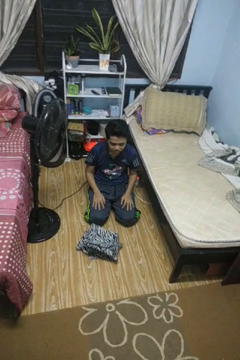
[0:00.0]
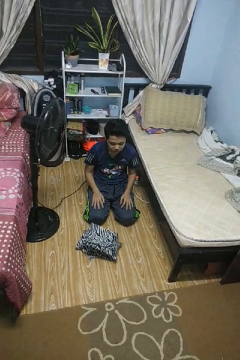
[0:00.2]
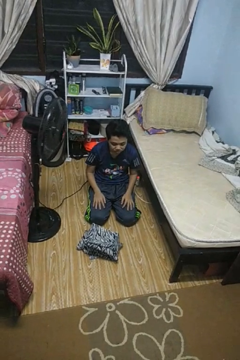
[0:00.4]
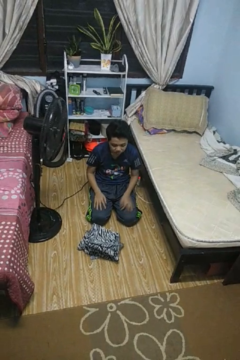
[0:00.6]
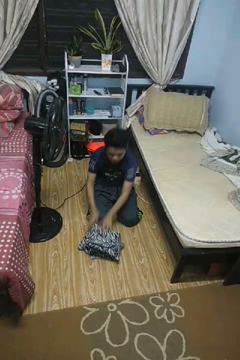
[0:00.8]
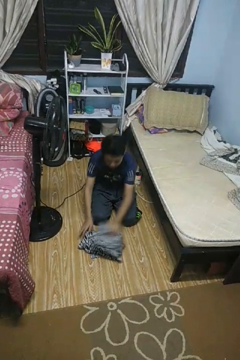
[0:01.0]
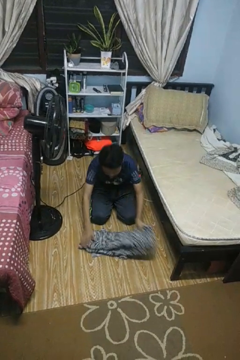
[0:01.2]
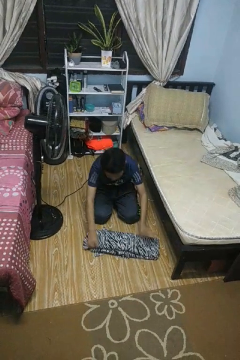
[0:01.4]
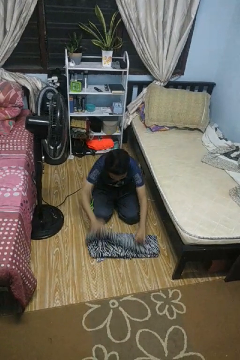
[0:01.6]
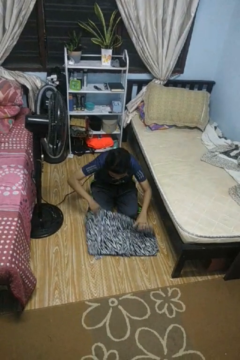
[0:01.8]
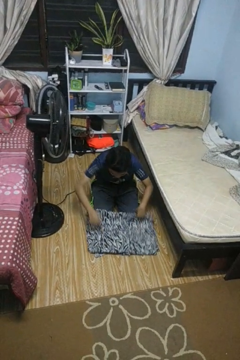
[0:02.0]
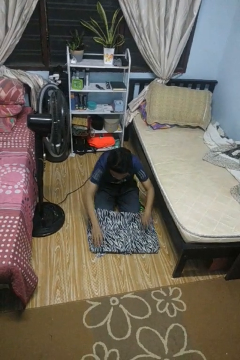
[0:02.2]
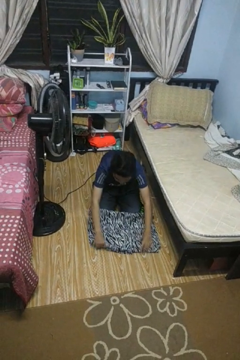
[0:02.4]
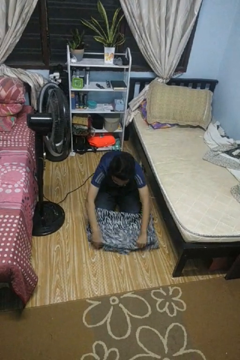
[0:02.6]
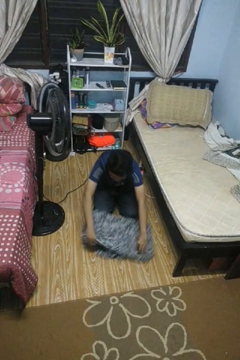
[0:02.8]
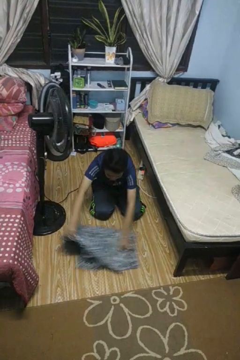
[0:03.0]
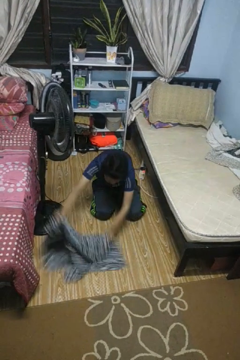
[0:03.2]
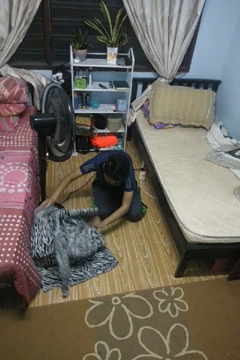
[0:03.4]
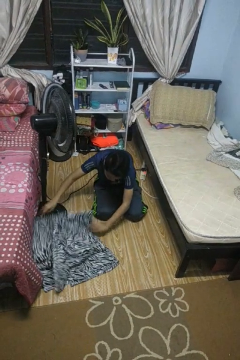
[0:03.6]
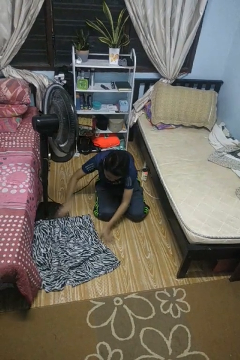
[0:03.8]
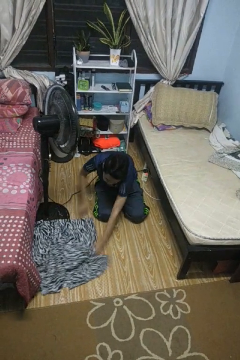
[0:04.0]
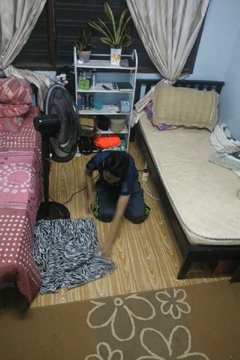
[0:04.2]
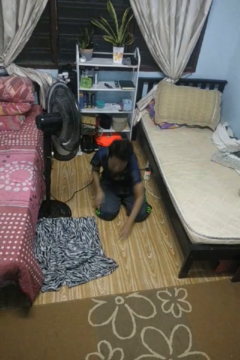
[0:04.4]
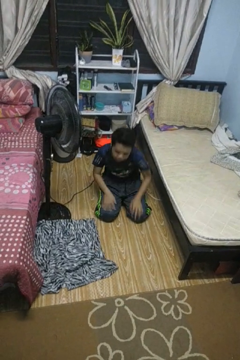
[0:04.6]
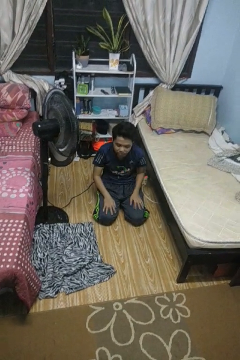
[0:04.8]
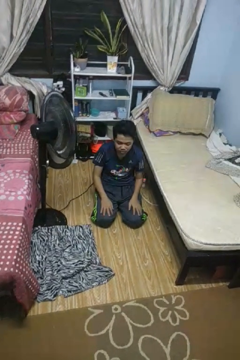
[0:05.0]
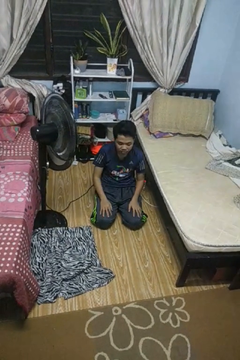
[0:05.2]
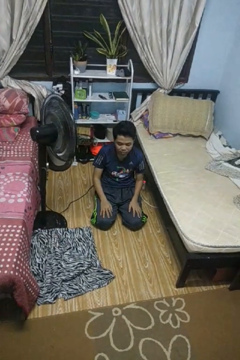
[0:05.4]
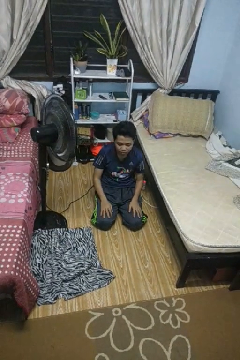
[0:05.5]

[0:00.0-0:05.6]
person unfolds blanket

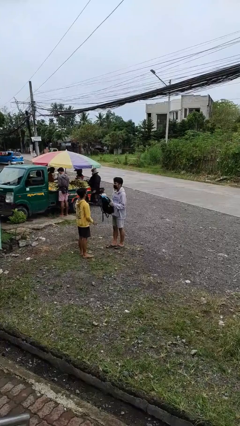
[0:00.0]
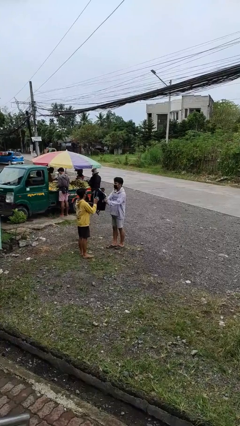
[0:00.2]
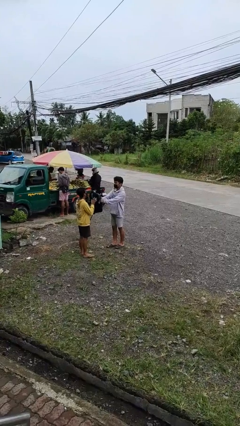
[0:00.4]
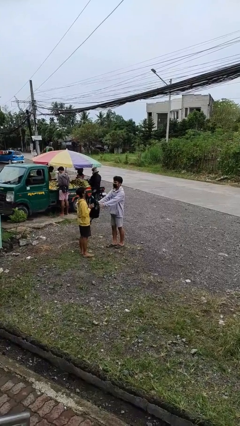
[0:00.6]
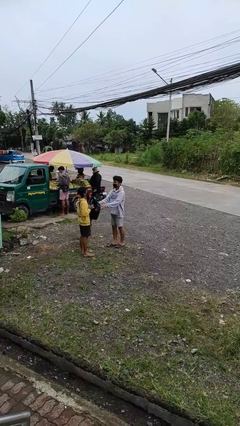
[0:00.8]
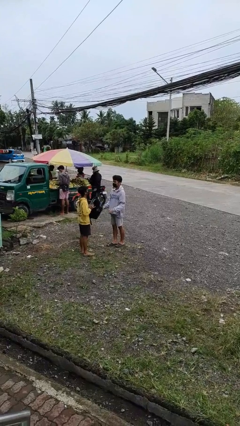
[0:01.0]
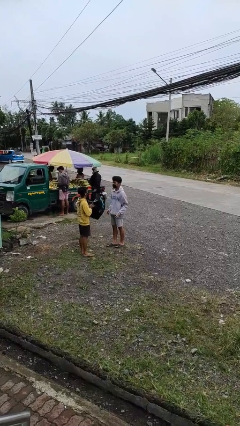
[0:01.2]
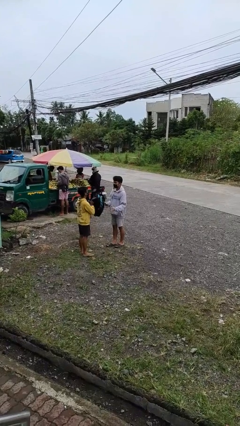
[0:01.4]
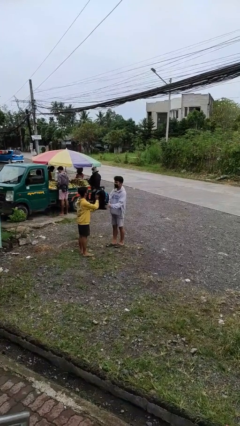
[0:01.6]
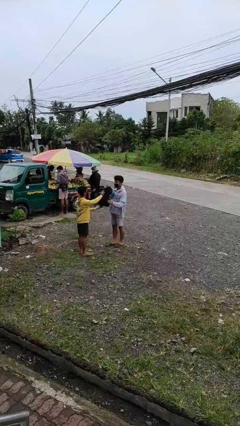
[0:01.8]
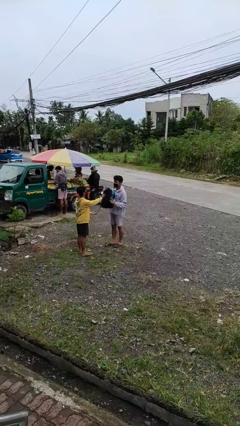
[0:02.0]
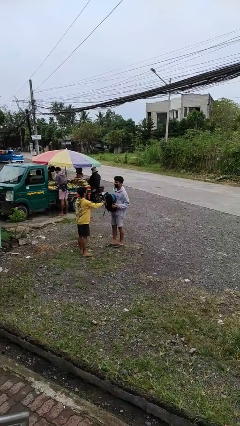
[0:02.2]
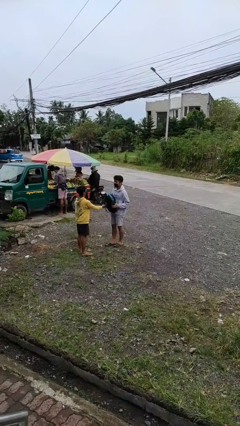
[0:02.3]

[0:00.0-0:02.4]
person transfers object to person

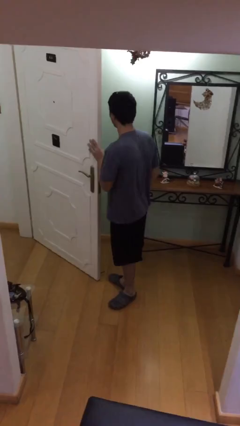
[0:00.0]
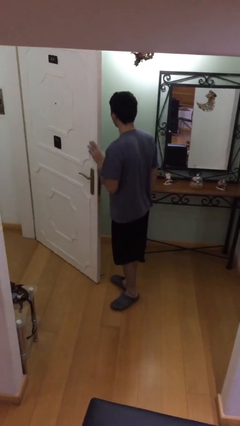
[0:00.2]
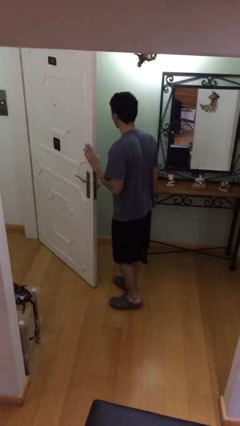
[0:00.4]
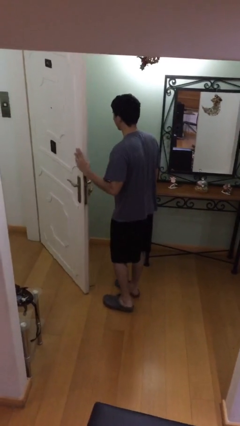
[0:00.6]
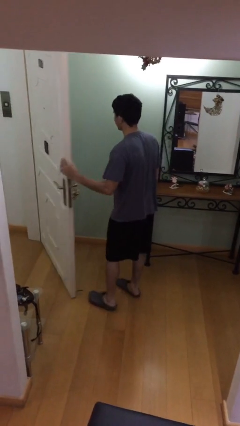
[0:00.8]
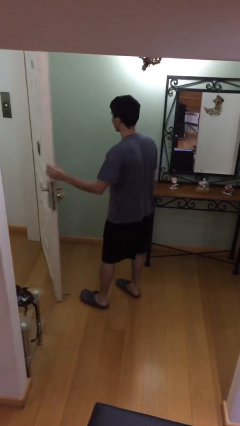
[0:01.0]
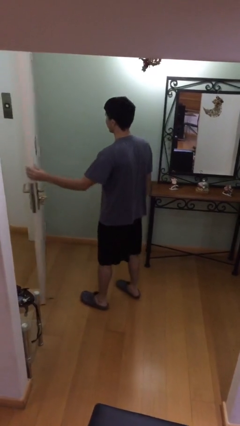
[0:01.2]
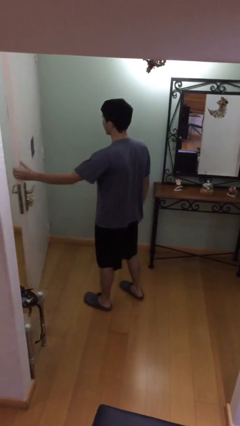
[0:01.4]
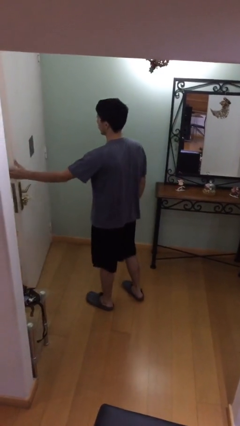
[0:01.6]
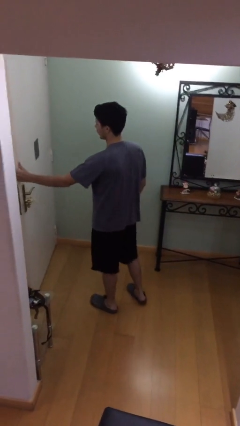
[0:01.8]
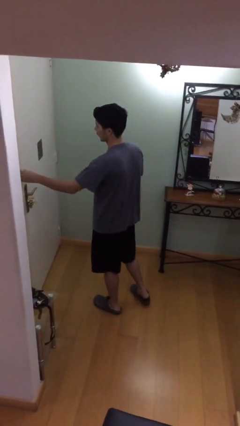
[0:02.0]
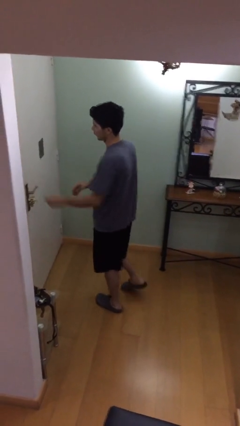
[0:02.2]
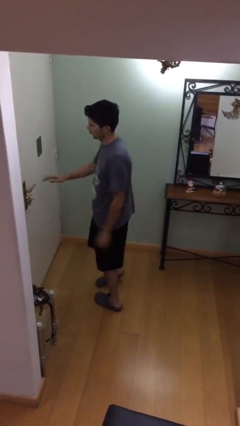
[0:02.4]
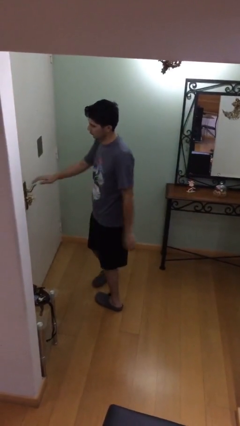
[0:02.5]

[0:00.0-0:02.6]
person closes facility door

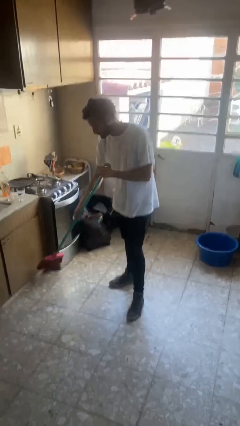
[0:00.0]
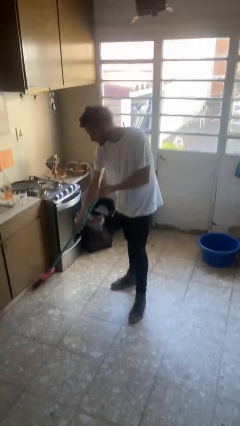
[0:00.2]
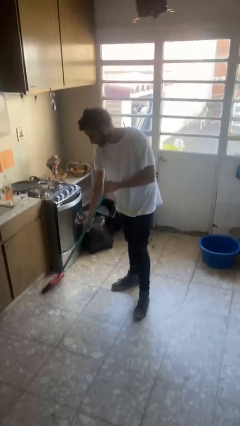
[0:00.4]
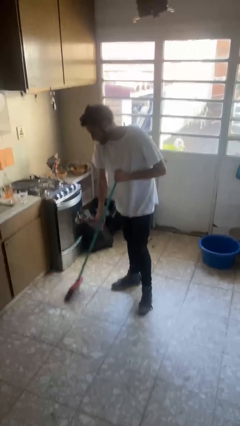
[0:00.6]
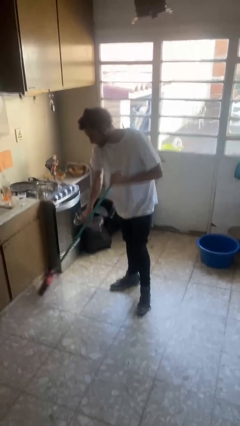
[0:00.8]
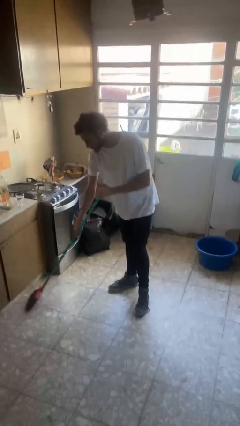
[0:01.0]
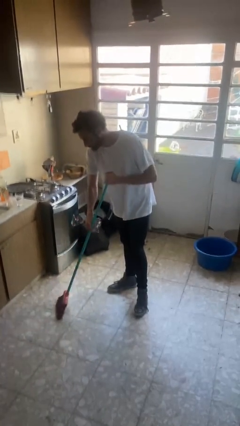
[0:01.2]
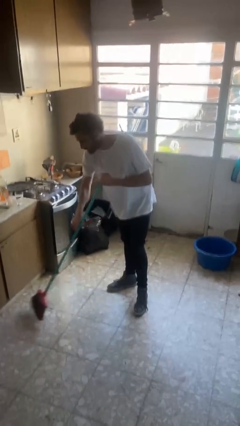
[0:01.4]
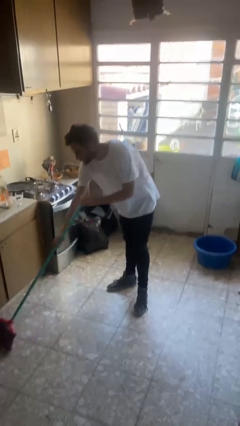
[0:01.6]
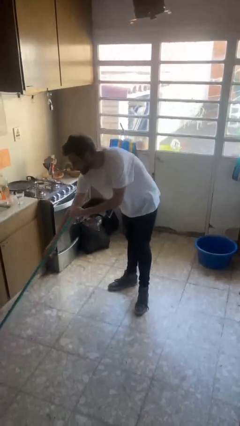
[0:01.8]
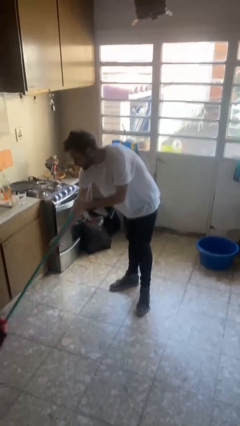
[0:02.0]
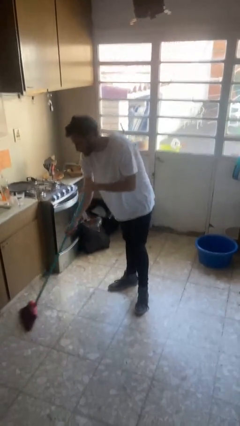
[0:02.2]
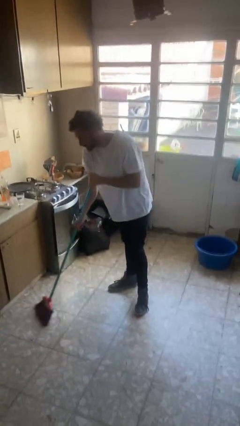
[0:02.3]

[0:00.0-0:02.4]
person sweeps floor

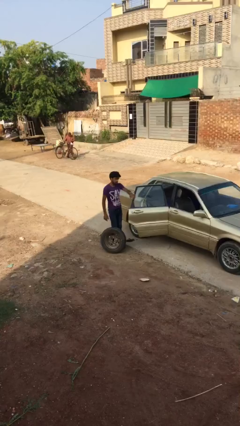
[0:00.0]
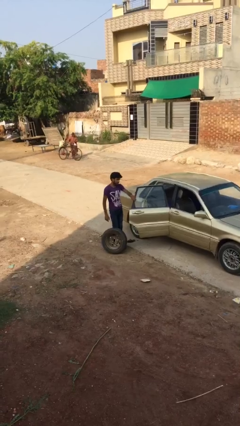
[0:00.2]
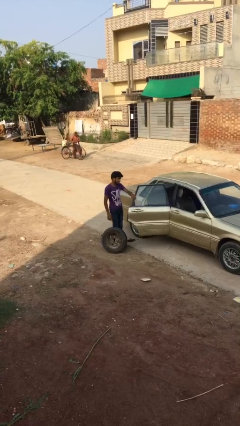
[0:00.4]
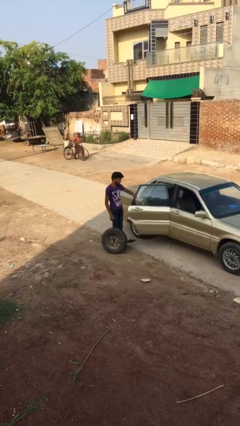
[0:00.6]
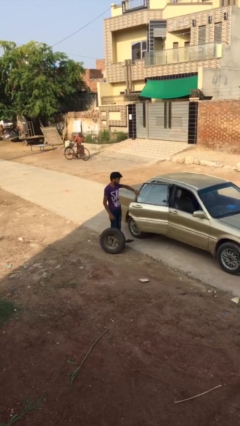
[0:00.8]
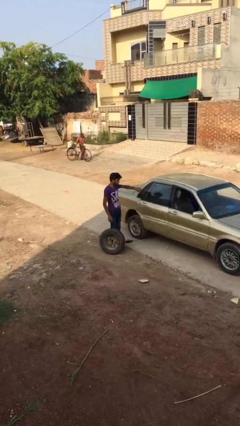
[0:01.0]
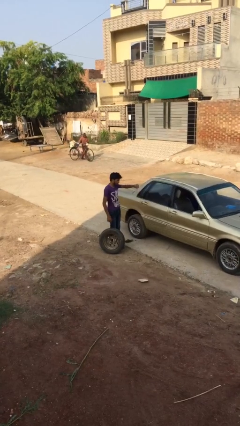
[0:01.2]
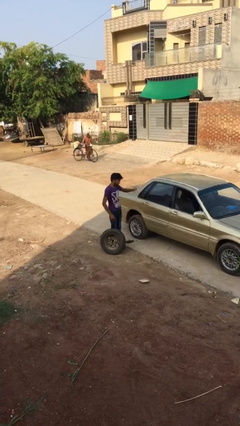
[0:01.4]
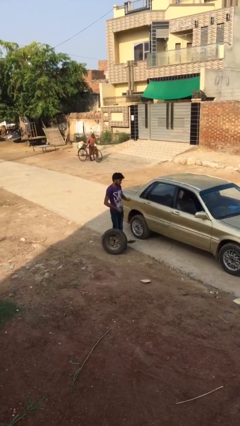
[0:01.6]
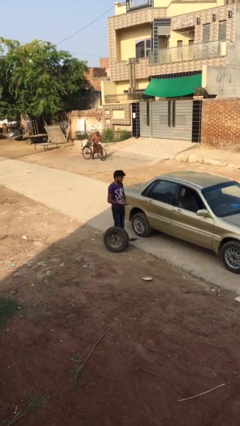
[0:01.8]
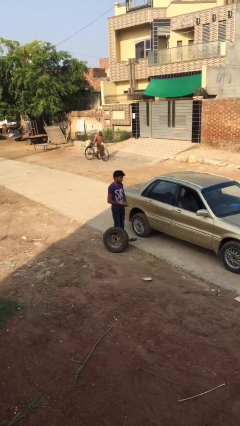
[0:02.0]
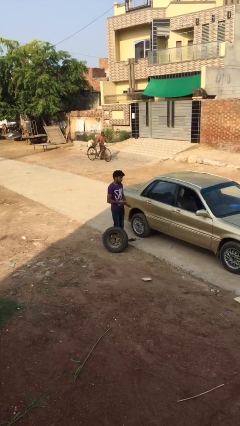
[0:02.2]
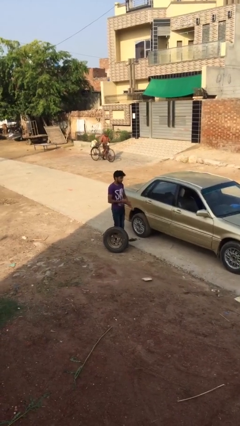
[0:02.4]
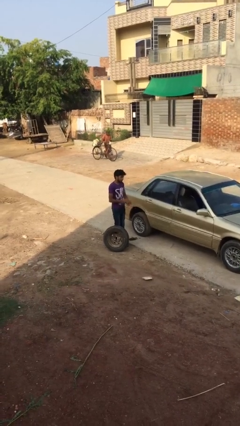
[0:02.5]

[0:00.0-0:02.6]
person closes car door

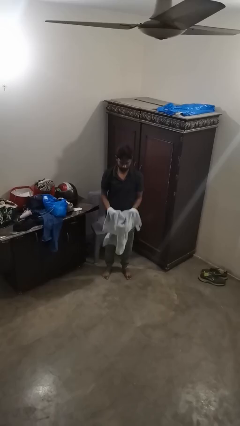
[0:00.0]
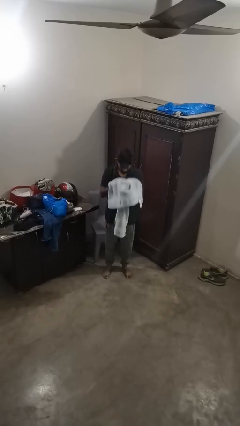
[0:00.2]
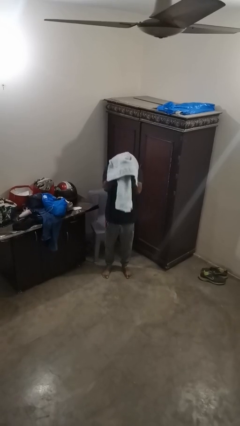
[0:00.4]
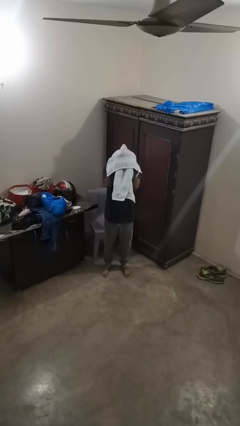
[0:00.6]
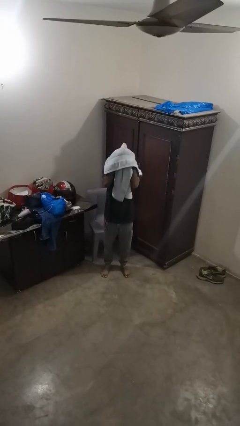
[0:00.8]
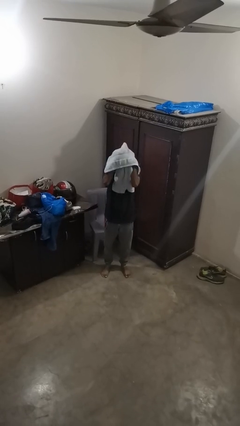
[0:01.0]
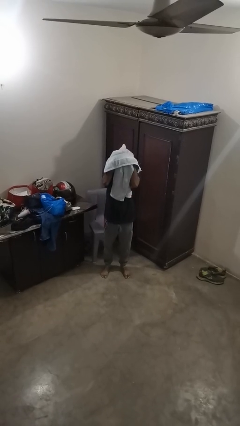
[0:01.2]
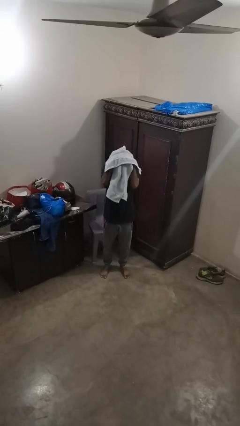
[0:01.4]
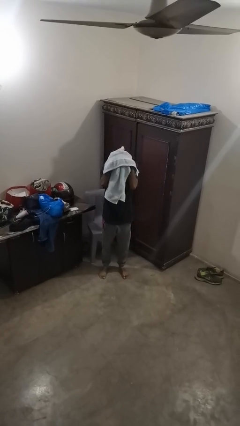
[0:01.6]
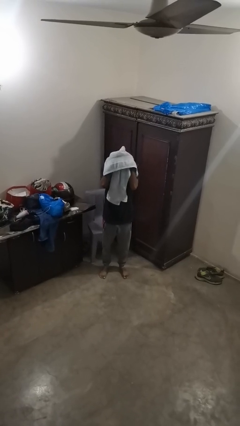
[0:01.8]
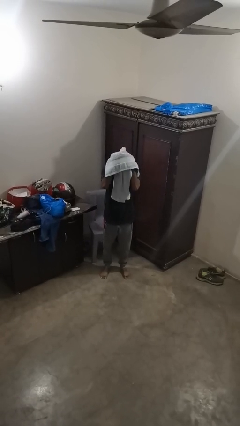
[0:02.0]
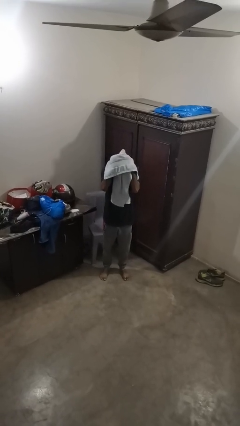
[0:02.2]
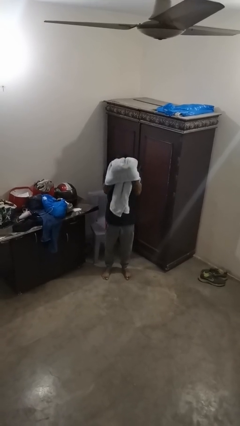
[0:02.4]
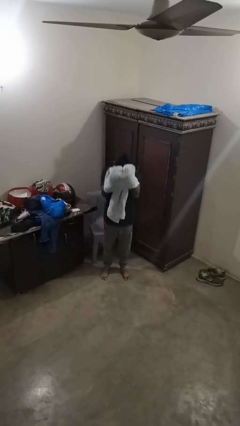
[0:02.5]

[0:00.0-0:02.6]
person dries hair with towel

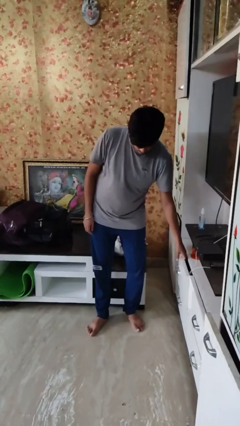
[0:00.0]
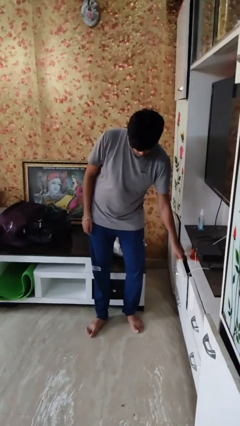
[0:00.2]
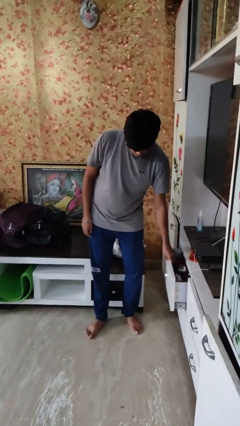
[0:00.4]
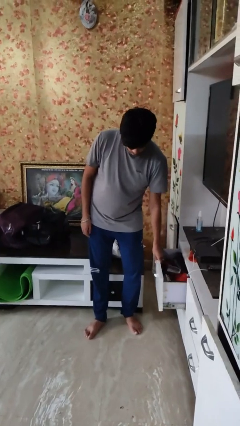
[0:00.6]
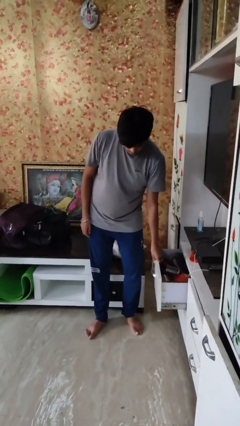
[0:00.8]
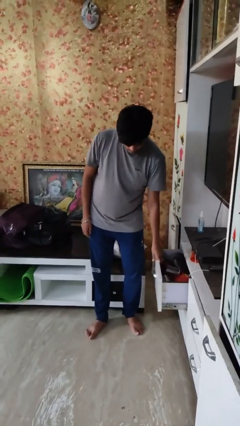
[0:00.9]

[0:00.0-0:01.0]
person opens kitchen drawer
